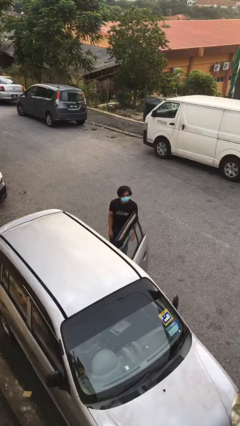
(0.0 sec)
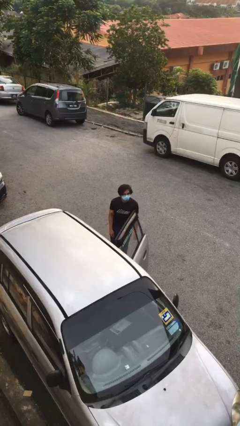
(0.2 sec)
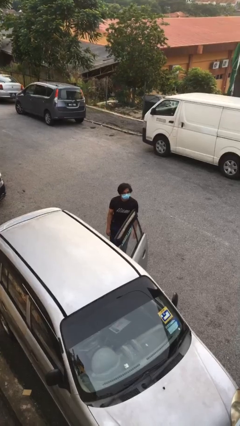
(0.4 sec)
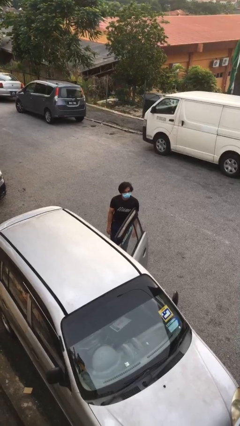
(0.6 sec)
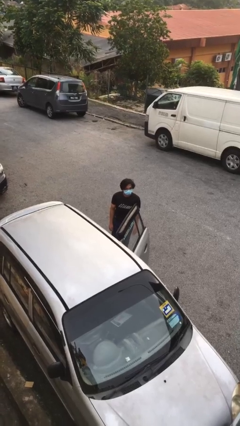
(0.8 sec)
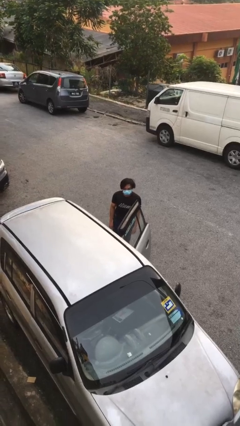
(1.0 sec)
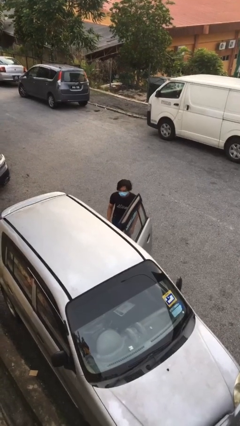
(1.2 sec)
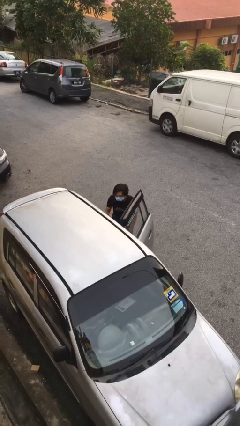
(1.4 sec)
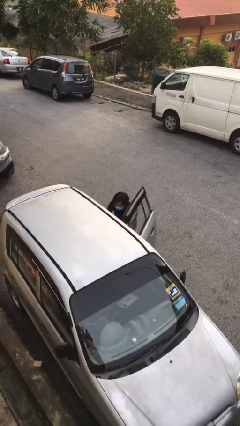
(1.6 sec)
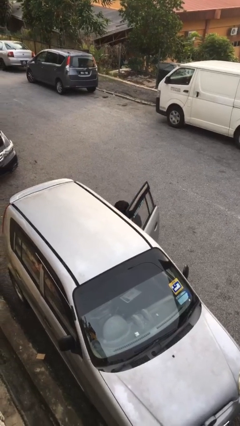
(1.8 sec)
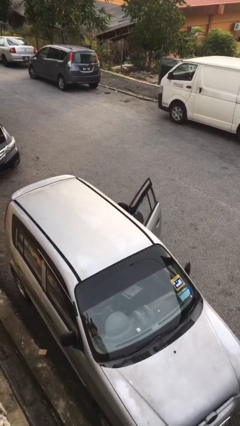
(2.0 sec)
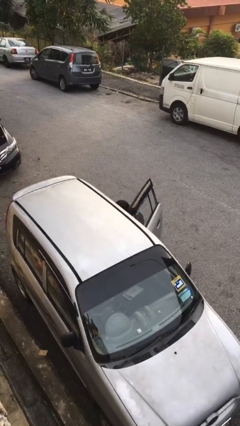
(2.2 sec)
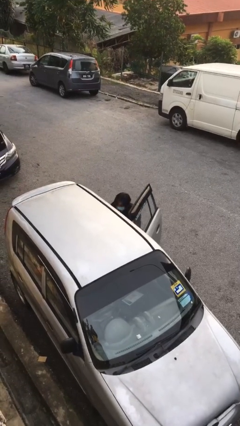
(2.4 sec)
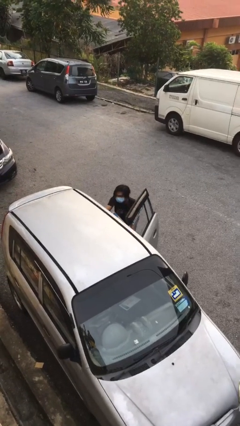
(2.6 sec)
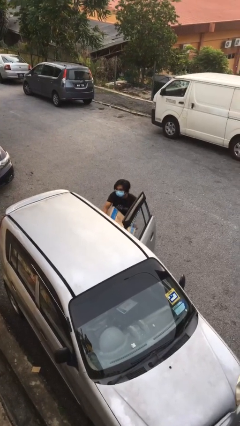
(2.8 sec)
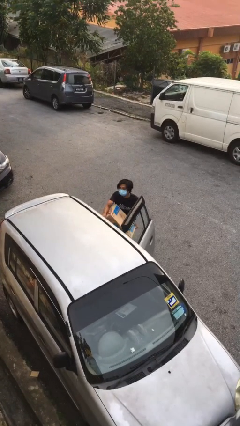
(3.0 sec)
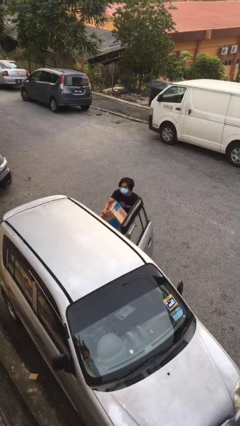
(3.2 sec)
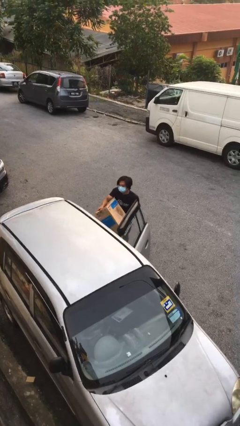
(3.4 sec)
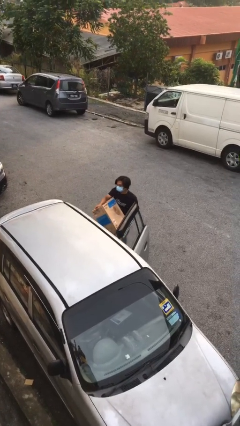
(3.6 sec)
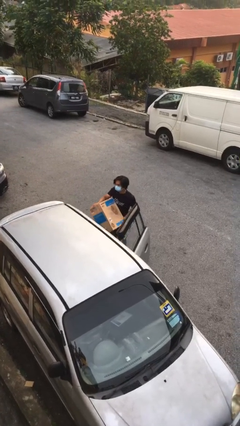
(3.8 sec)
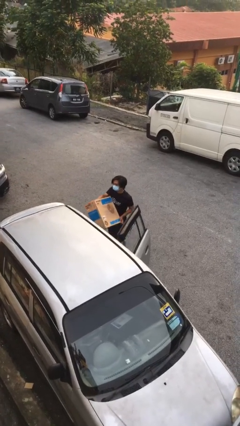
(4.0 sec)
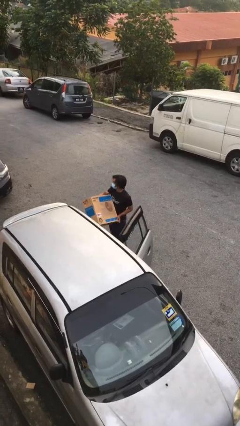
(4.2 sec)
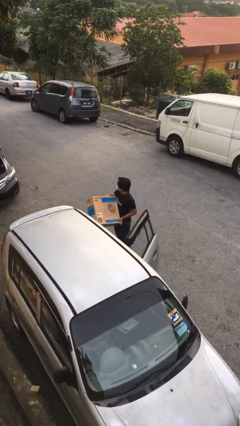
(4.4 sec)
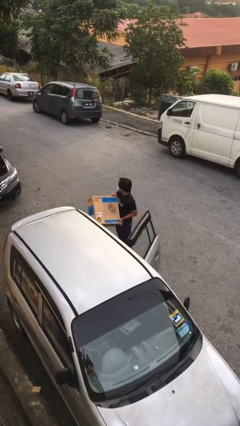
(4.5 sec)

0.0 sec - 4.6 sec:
person unloads car

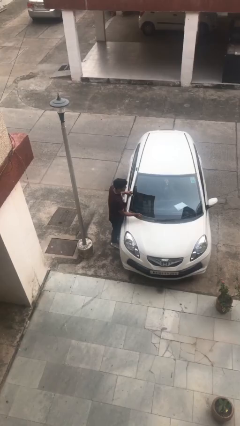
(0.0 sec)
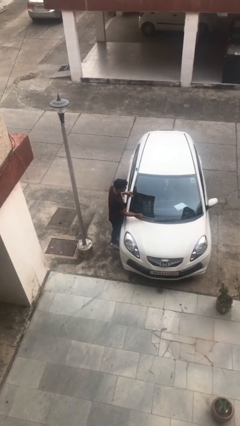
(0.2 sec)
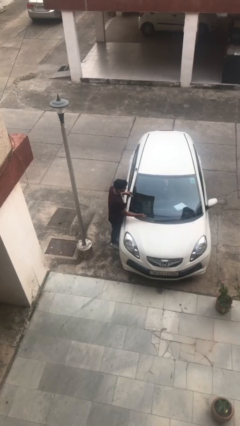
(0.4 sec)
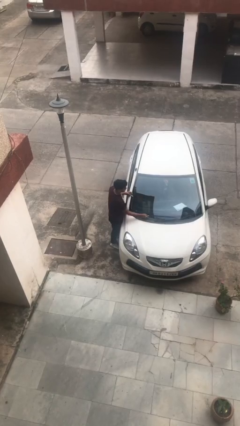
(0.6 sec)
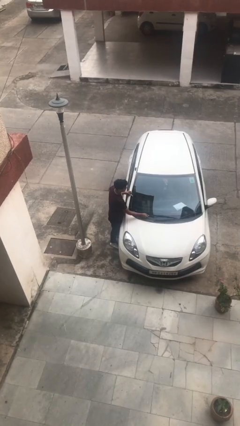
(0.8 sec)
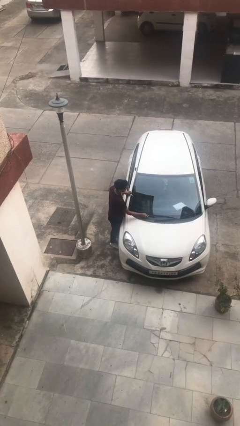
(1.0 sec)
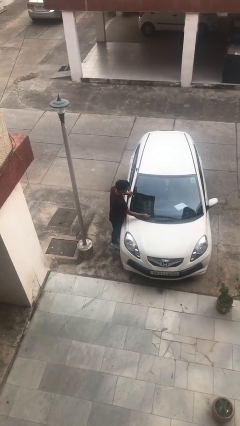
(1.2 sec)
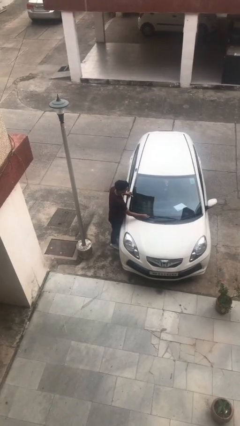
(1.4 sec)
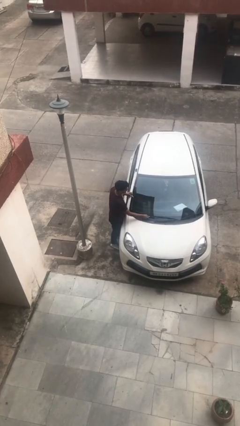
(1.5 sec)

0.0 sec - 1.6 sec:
person flips down car wipers

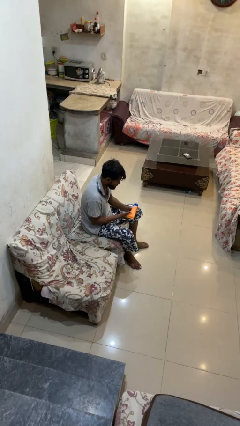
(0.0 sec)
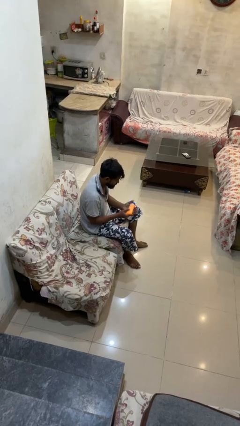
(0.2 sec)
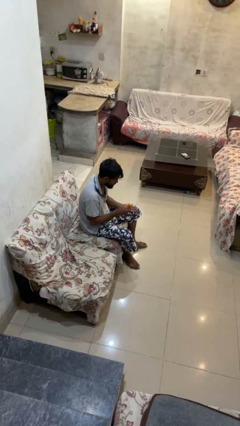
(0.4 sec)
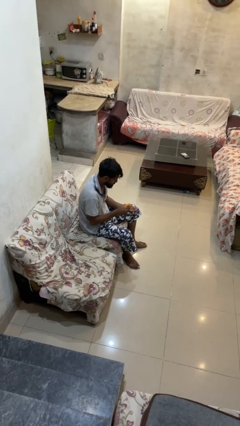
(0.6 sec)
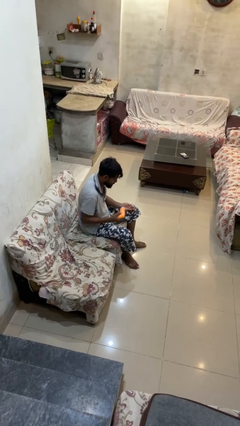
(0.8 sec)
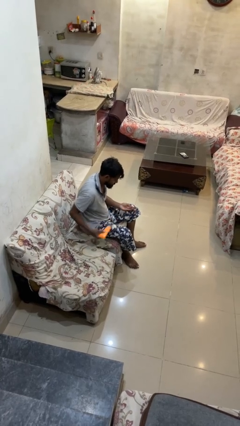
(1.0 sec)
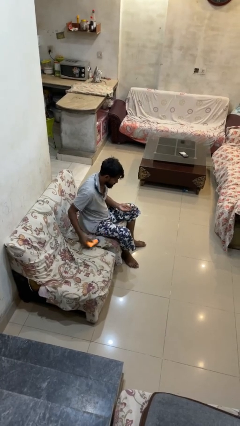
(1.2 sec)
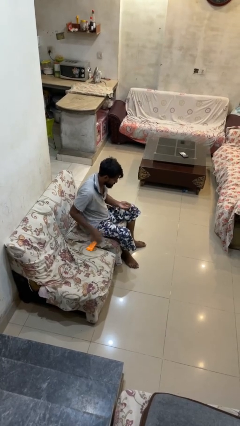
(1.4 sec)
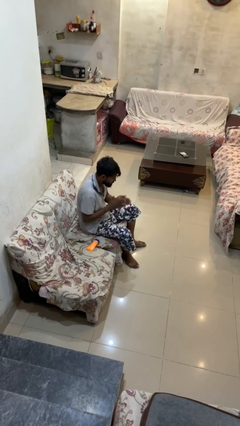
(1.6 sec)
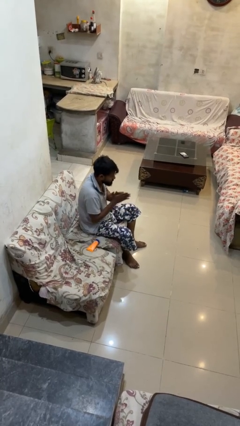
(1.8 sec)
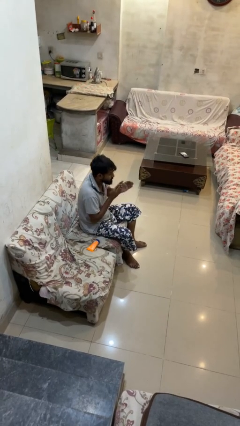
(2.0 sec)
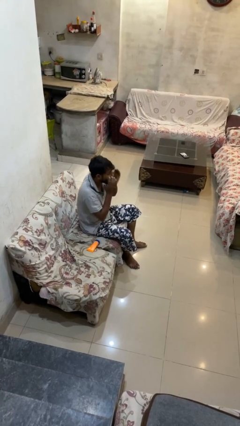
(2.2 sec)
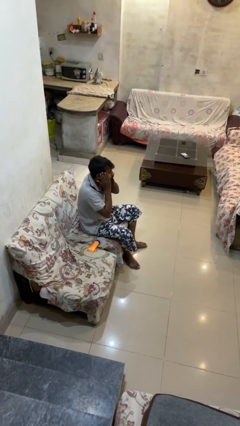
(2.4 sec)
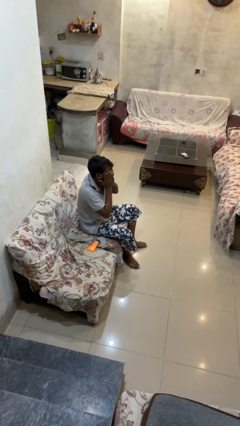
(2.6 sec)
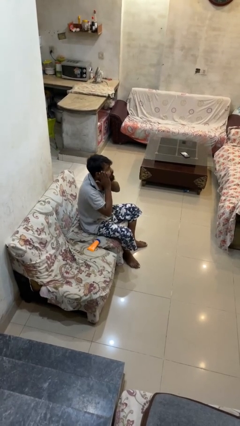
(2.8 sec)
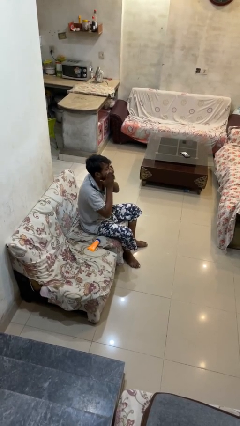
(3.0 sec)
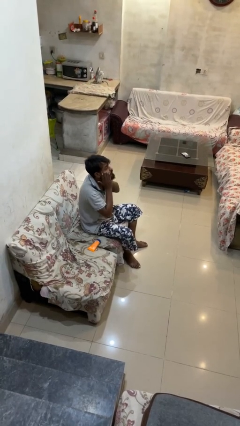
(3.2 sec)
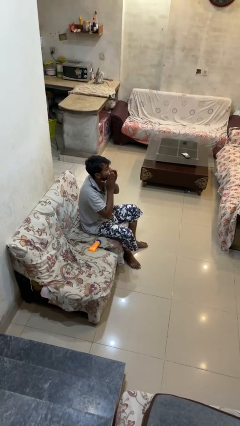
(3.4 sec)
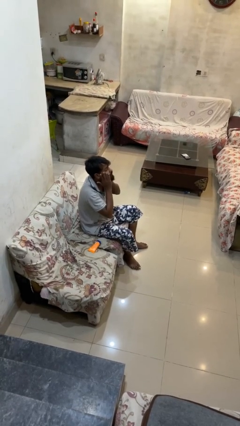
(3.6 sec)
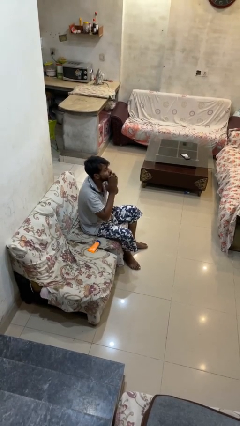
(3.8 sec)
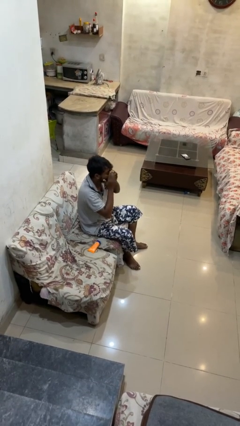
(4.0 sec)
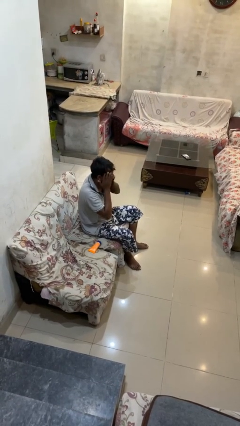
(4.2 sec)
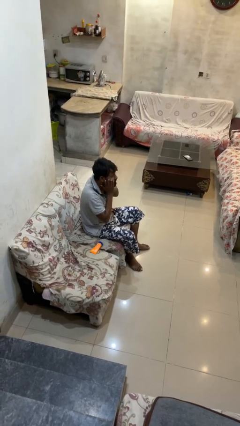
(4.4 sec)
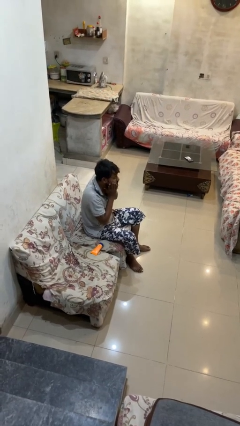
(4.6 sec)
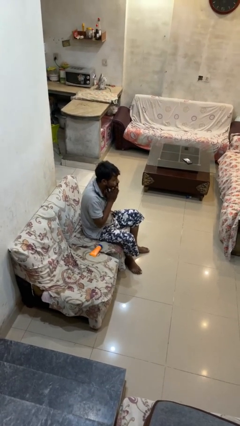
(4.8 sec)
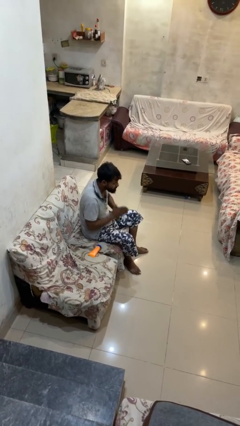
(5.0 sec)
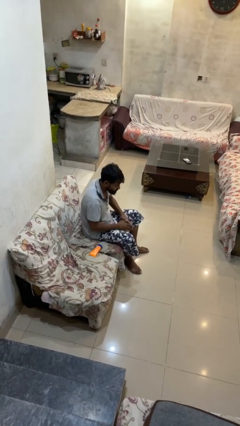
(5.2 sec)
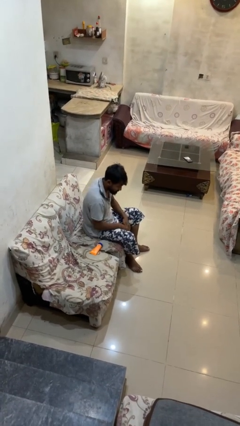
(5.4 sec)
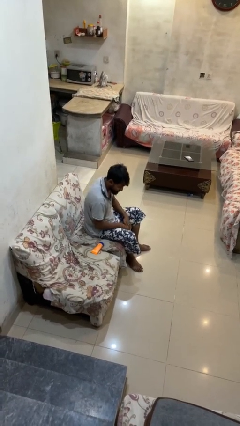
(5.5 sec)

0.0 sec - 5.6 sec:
person applies facial moisturizer

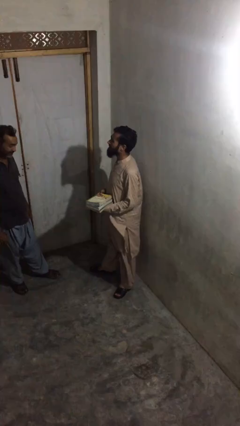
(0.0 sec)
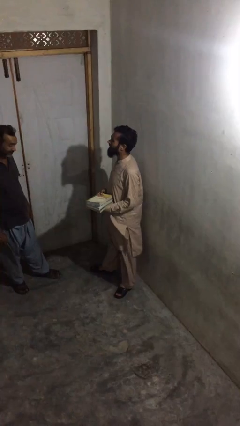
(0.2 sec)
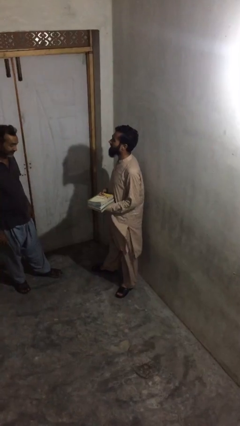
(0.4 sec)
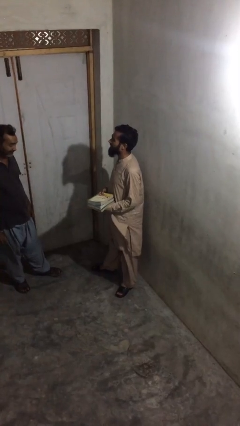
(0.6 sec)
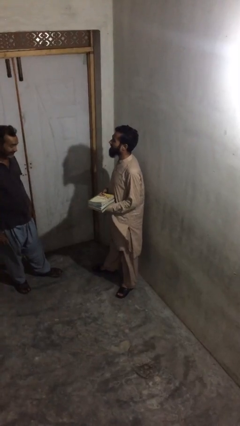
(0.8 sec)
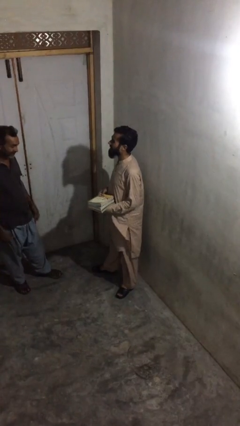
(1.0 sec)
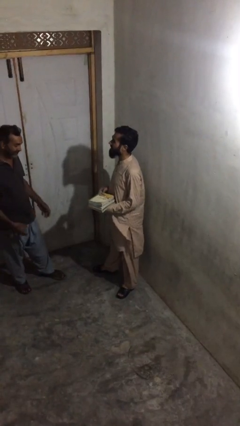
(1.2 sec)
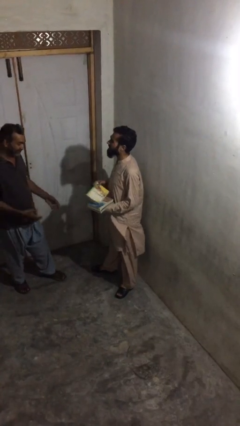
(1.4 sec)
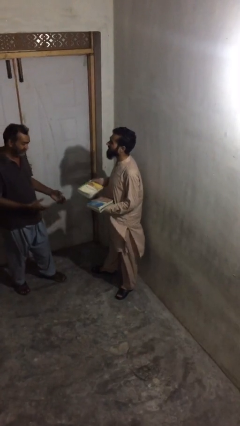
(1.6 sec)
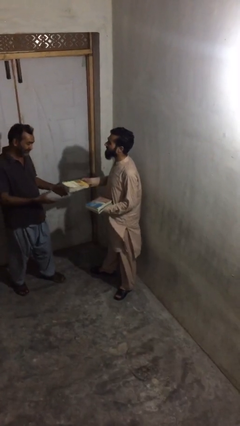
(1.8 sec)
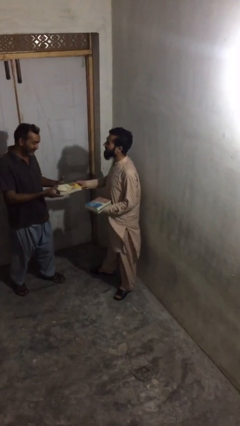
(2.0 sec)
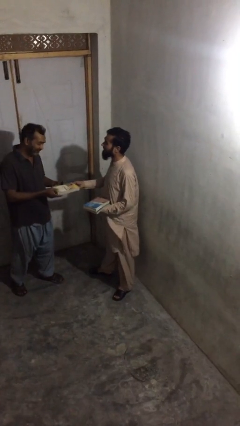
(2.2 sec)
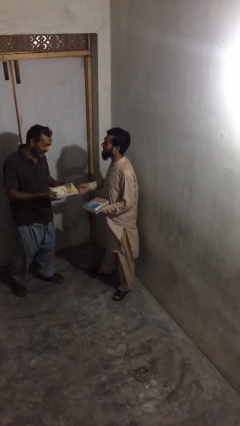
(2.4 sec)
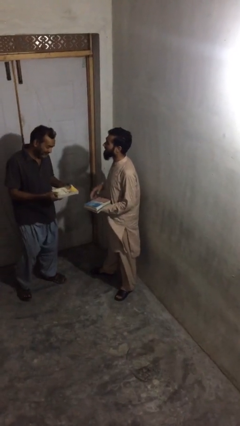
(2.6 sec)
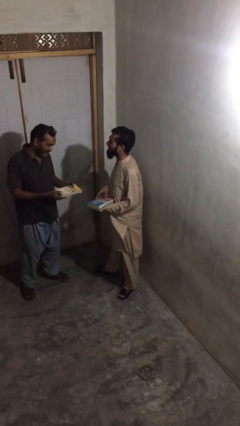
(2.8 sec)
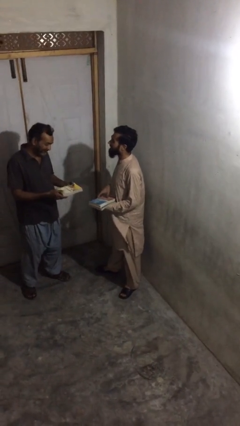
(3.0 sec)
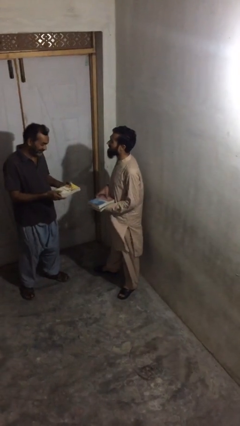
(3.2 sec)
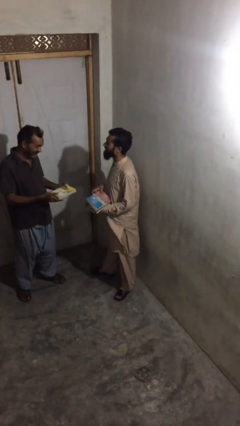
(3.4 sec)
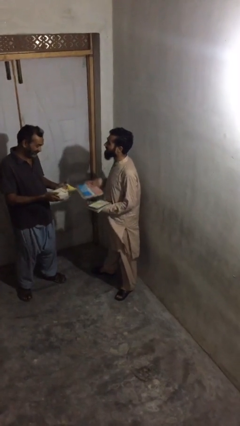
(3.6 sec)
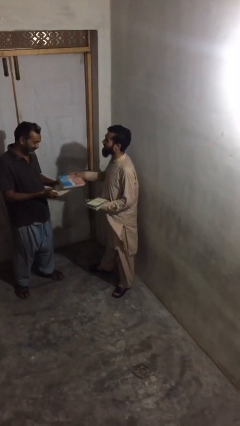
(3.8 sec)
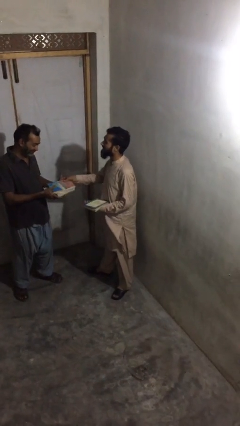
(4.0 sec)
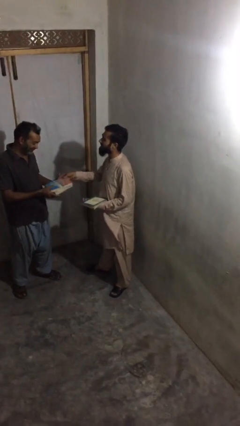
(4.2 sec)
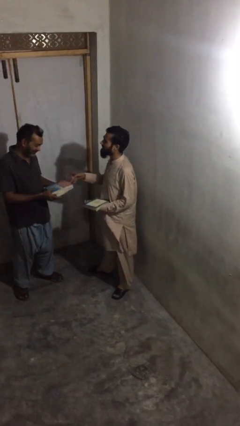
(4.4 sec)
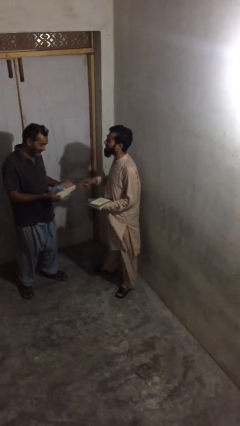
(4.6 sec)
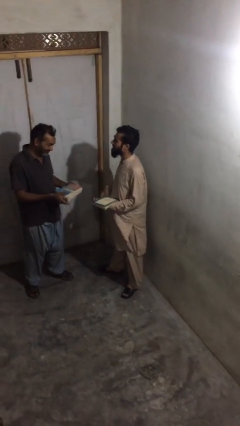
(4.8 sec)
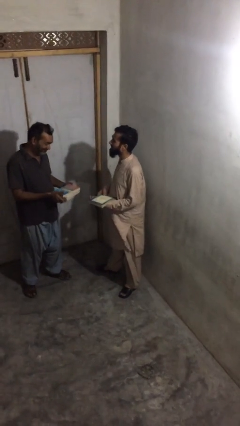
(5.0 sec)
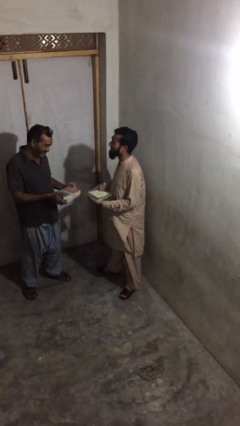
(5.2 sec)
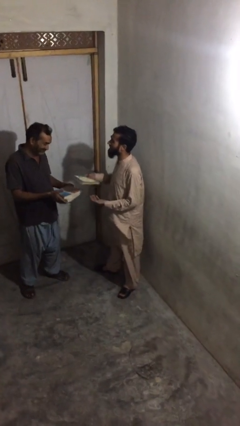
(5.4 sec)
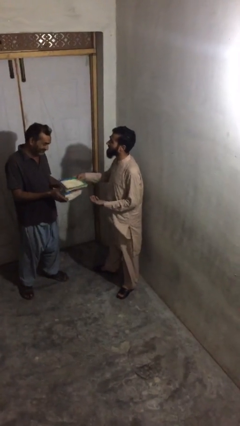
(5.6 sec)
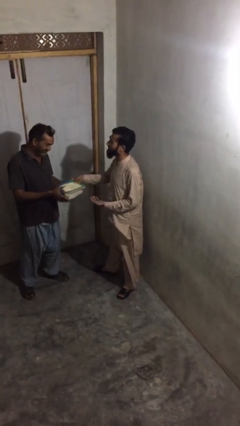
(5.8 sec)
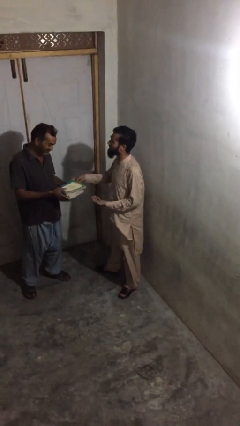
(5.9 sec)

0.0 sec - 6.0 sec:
person transfers object to person
